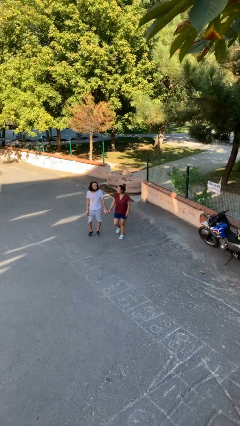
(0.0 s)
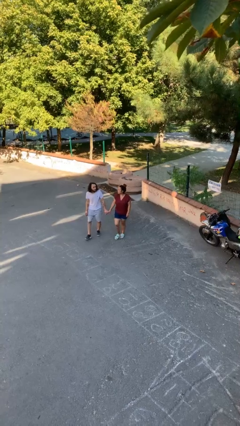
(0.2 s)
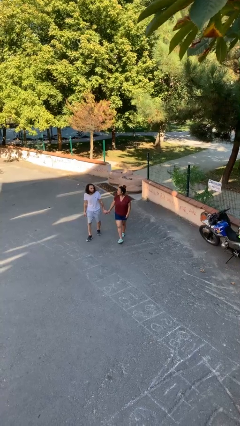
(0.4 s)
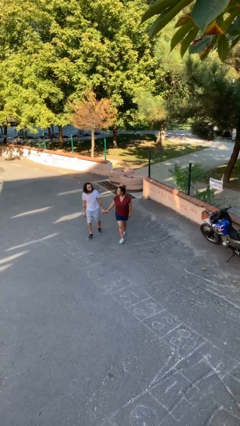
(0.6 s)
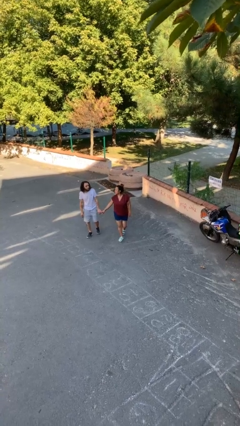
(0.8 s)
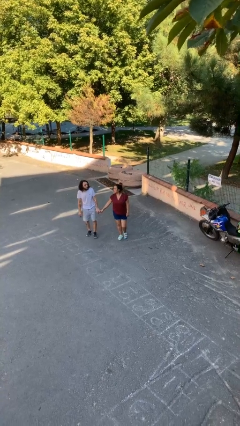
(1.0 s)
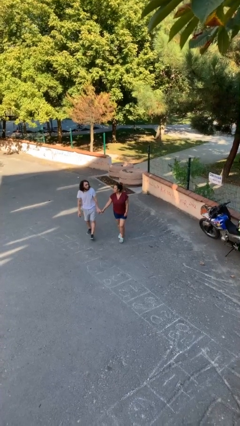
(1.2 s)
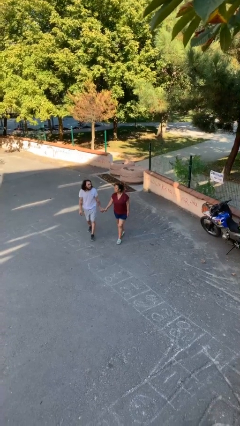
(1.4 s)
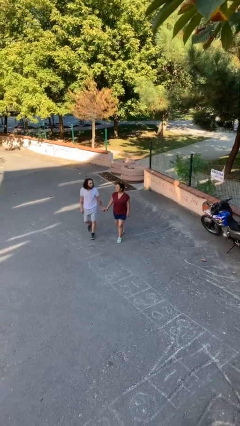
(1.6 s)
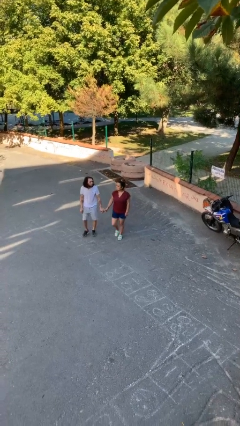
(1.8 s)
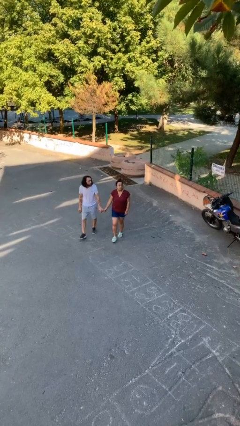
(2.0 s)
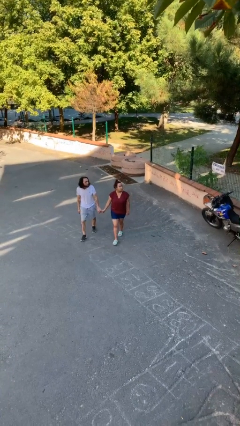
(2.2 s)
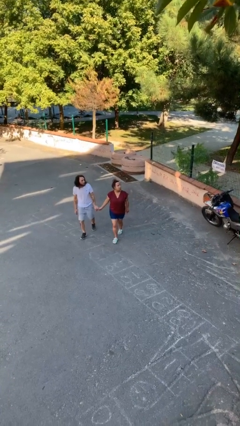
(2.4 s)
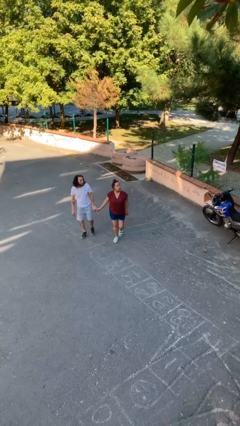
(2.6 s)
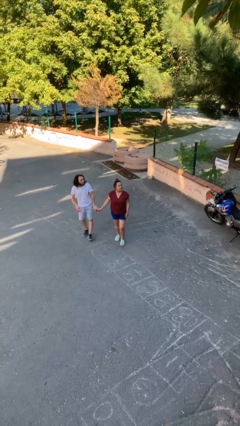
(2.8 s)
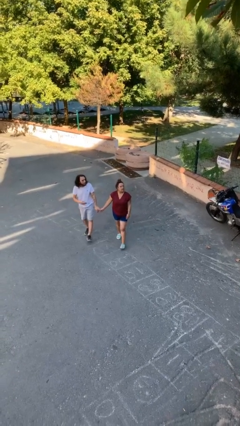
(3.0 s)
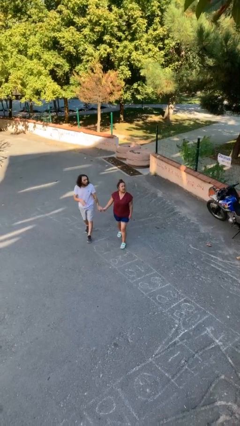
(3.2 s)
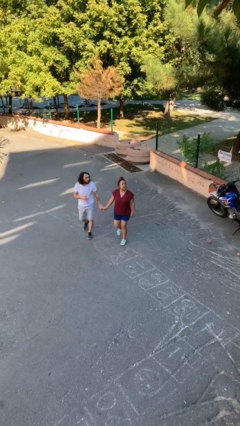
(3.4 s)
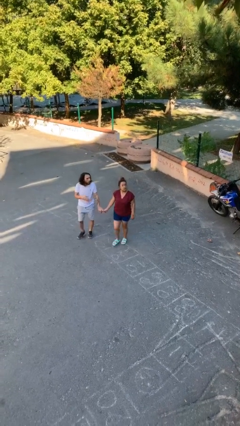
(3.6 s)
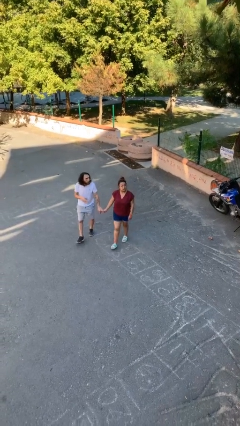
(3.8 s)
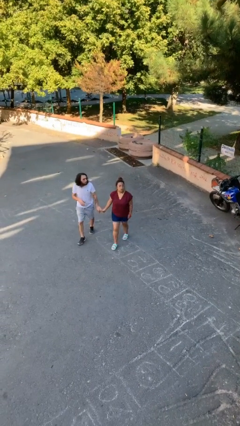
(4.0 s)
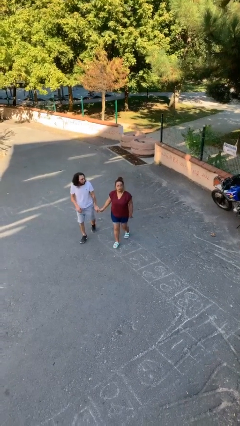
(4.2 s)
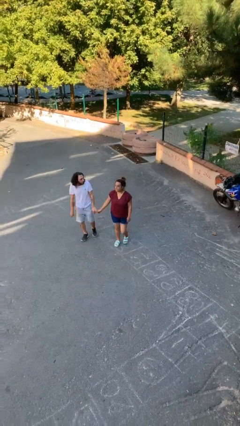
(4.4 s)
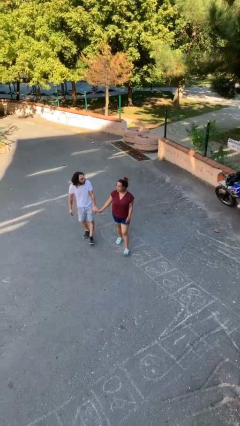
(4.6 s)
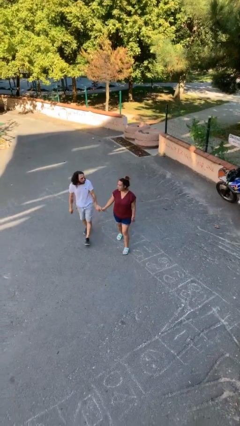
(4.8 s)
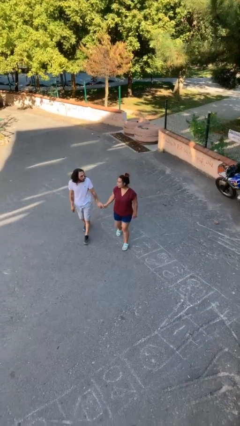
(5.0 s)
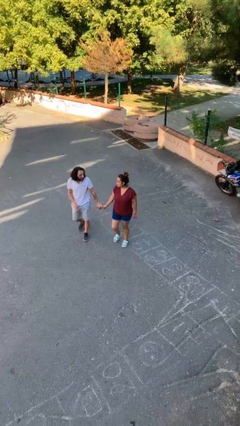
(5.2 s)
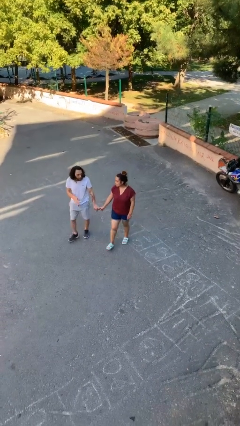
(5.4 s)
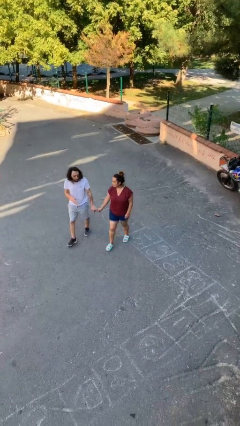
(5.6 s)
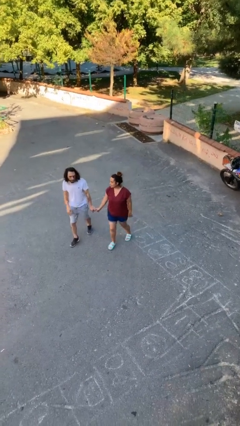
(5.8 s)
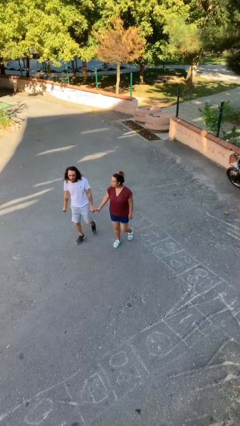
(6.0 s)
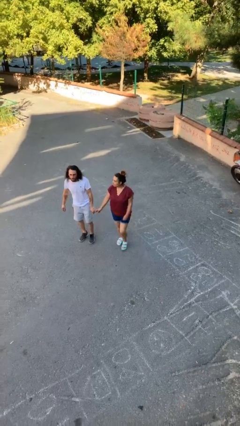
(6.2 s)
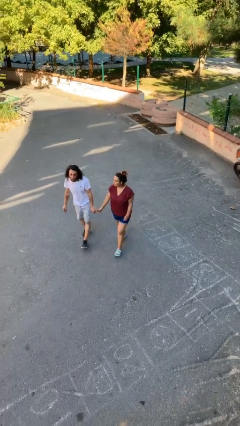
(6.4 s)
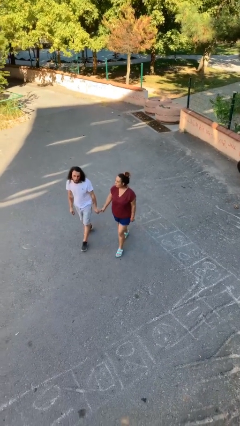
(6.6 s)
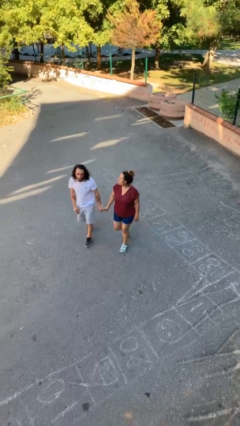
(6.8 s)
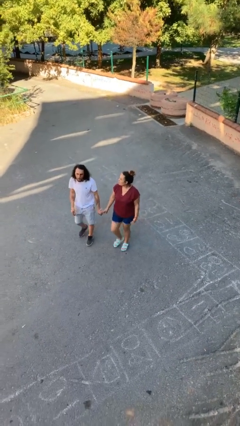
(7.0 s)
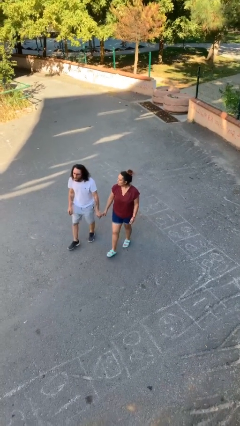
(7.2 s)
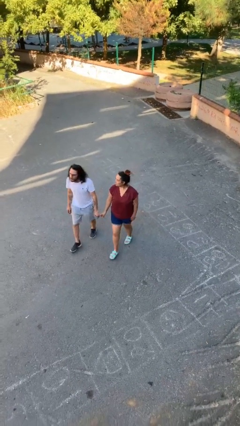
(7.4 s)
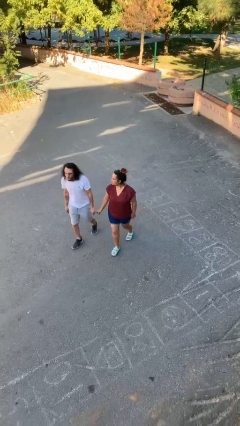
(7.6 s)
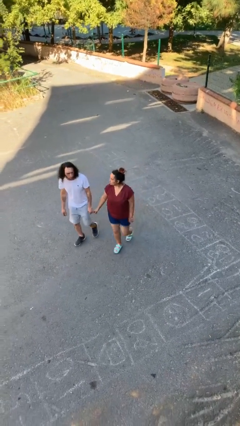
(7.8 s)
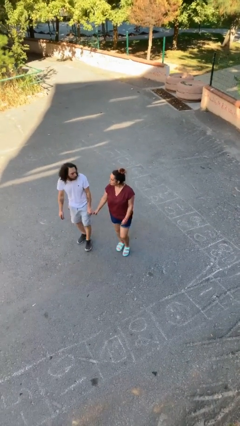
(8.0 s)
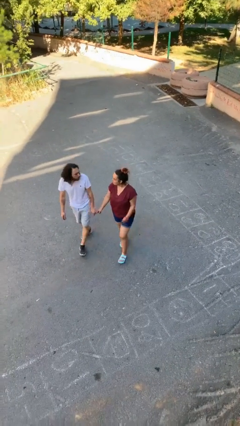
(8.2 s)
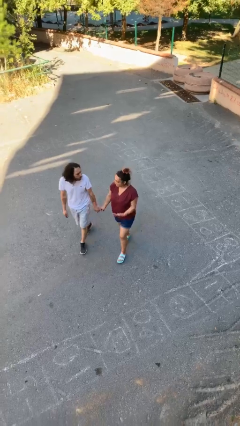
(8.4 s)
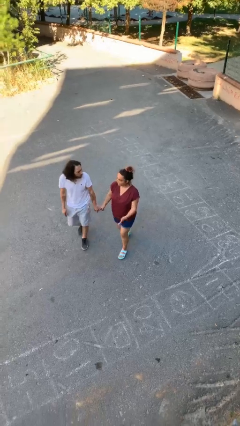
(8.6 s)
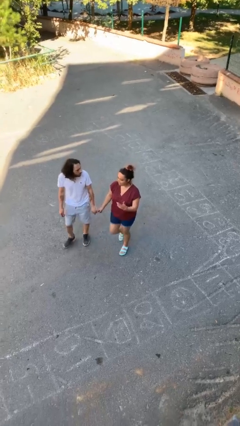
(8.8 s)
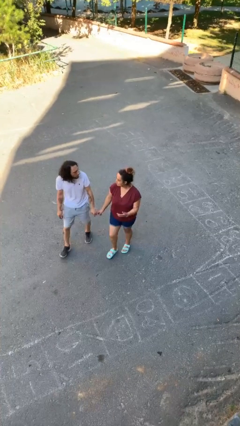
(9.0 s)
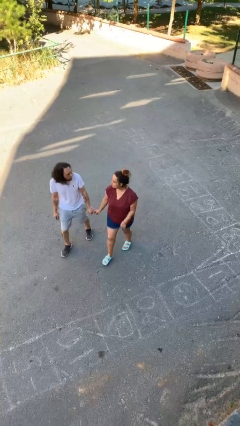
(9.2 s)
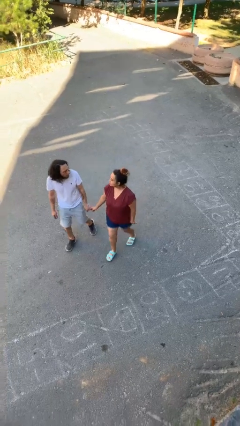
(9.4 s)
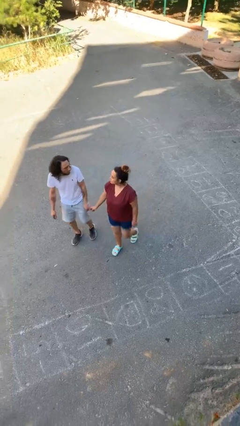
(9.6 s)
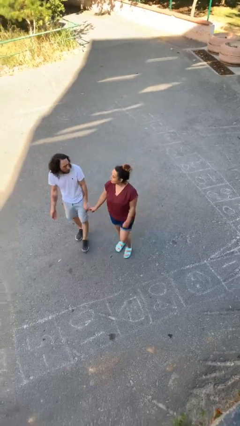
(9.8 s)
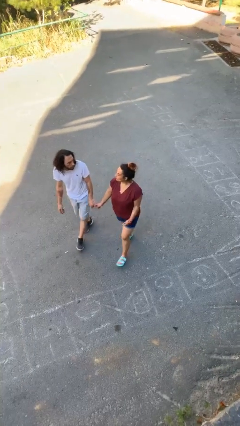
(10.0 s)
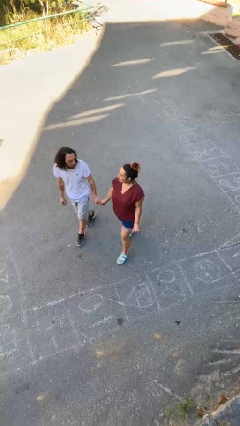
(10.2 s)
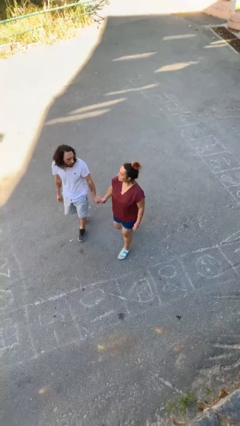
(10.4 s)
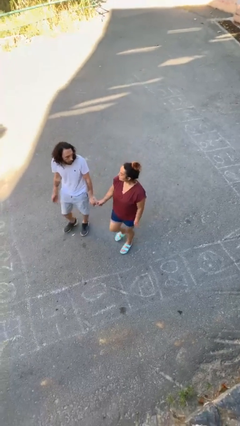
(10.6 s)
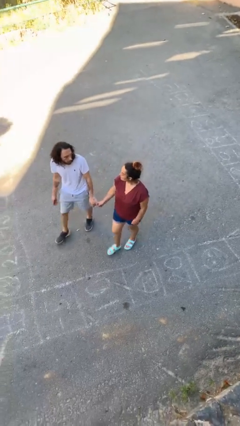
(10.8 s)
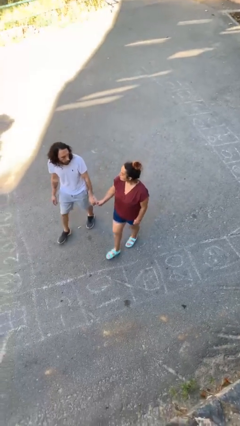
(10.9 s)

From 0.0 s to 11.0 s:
person holds hand

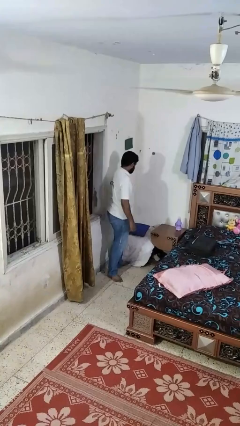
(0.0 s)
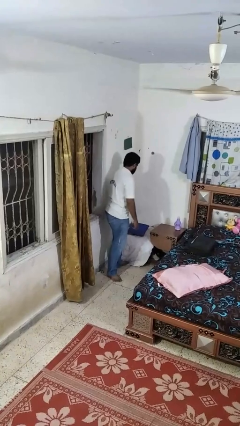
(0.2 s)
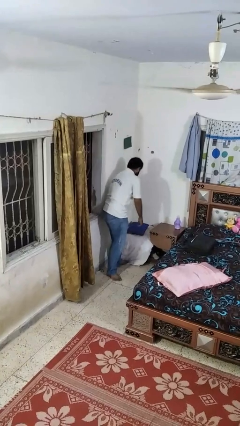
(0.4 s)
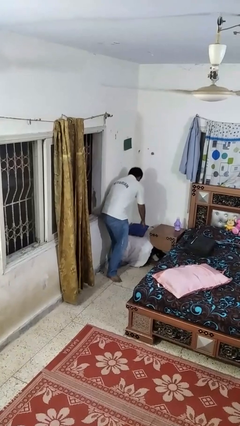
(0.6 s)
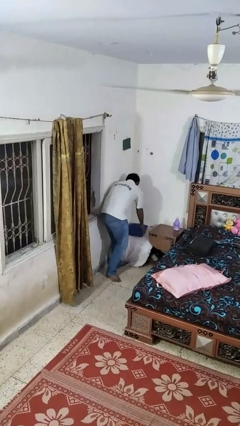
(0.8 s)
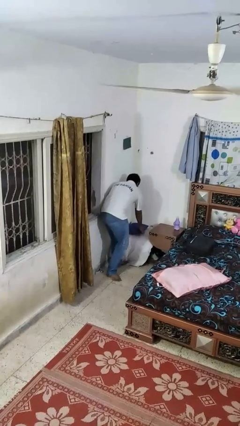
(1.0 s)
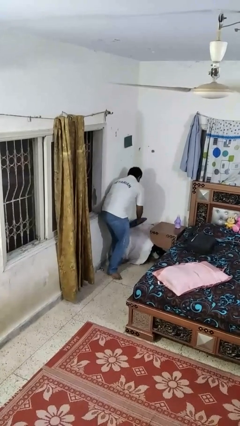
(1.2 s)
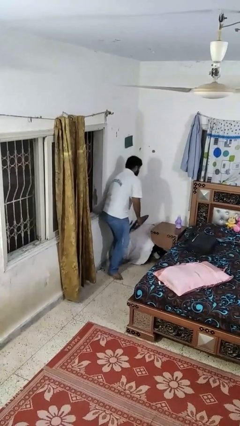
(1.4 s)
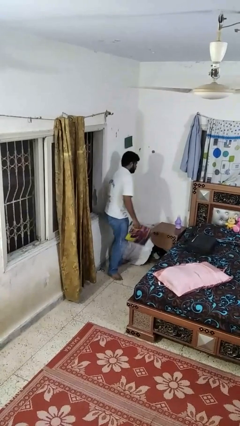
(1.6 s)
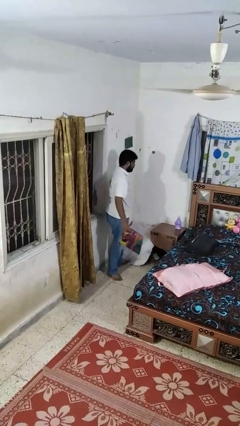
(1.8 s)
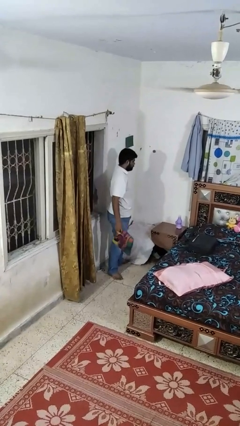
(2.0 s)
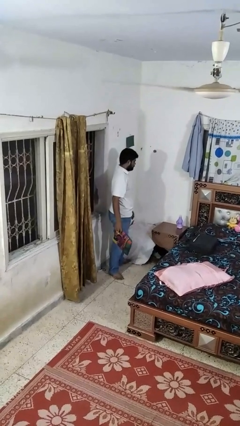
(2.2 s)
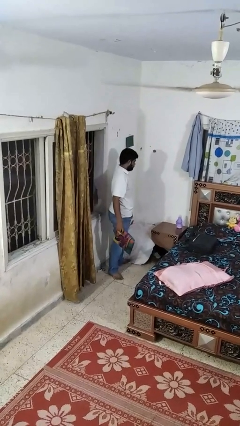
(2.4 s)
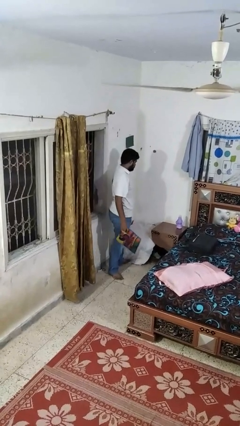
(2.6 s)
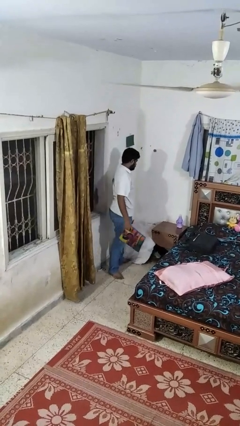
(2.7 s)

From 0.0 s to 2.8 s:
person picks up object from couch

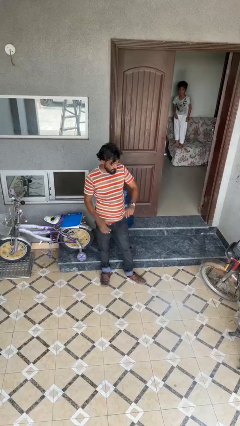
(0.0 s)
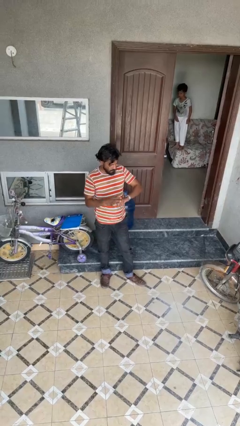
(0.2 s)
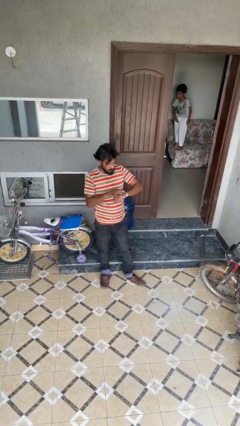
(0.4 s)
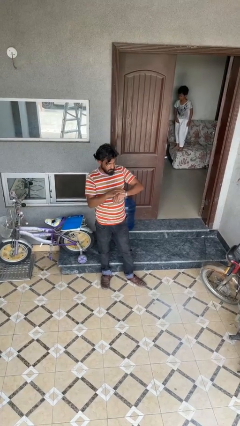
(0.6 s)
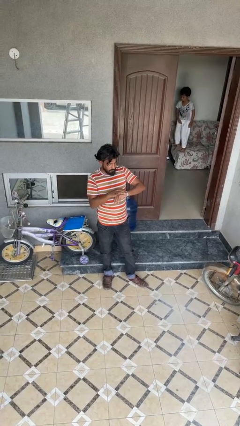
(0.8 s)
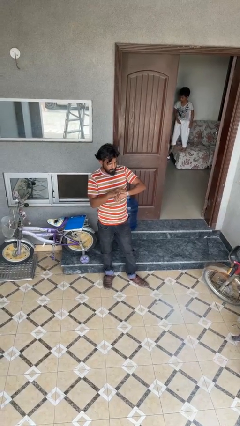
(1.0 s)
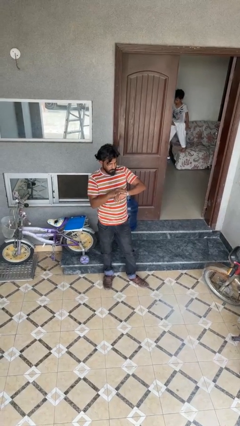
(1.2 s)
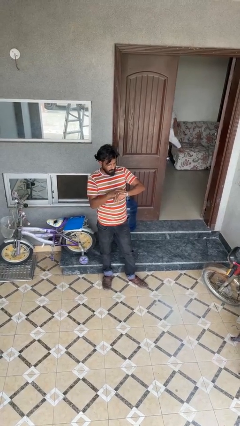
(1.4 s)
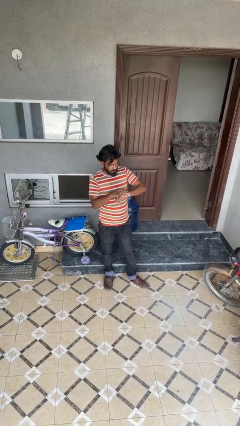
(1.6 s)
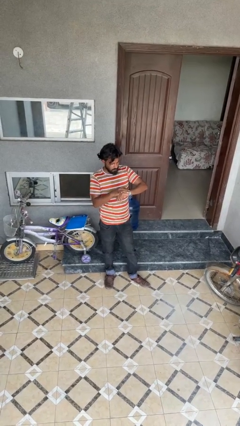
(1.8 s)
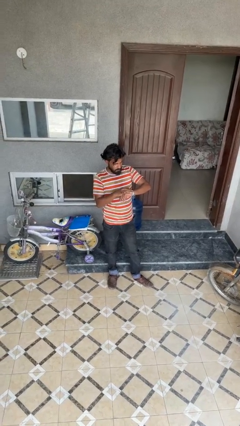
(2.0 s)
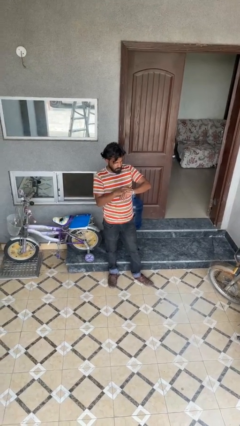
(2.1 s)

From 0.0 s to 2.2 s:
person looks at wristwatch

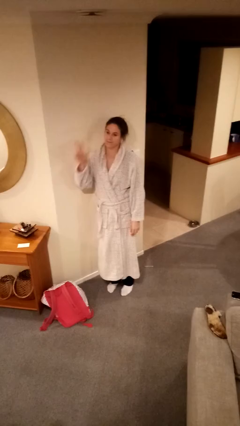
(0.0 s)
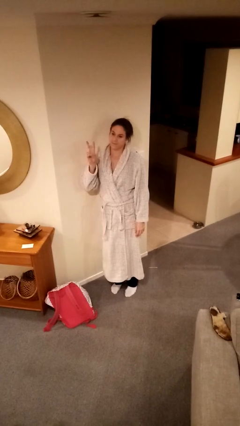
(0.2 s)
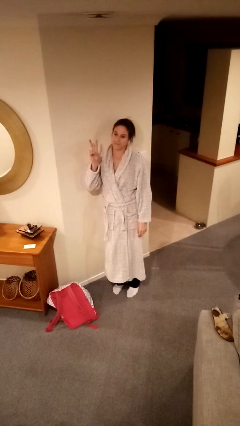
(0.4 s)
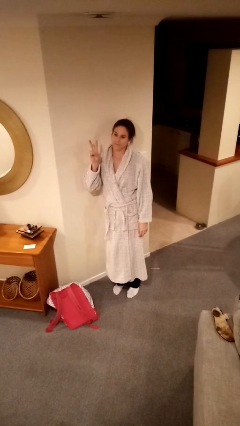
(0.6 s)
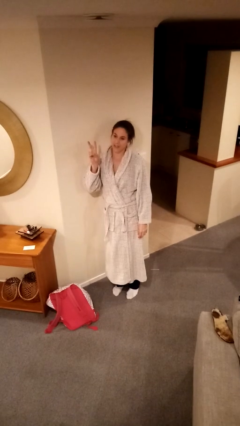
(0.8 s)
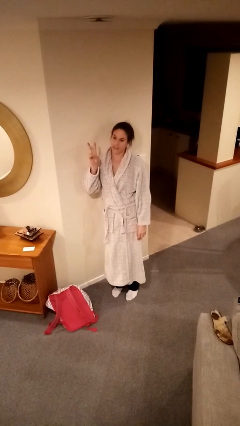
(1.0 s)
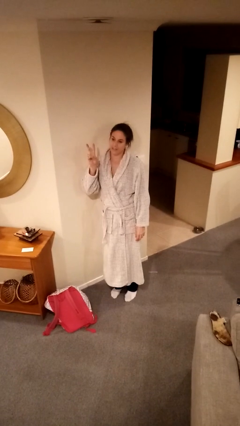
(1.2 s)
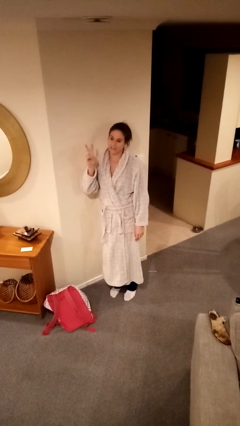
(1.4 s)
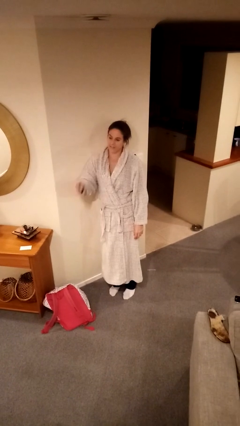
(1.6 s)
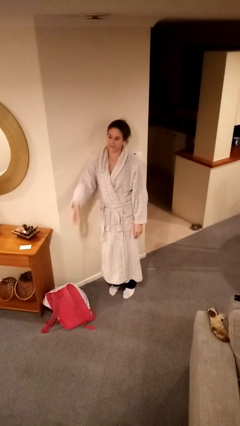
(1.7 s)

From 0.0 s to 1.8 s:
person gestures peace
